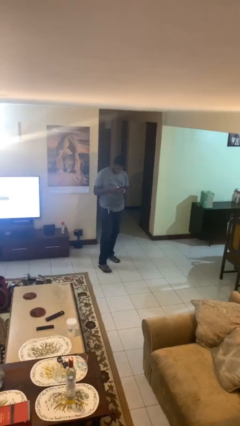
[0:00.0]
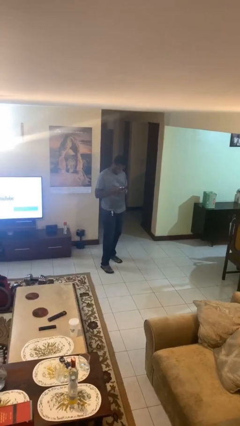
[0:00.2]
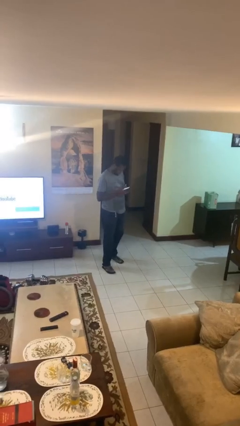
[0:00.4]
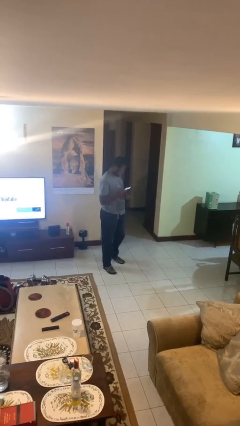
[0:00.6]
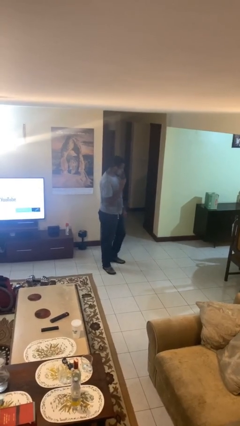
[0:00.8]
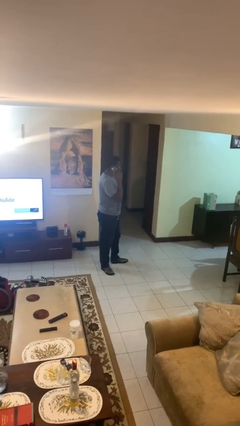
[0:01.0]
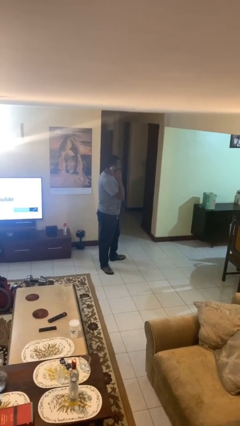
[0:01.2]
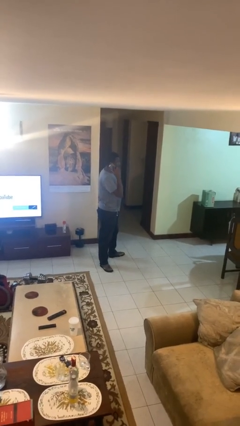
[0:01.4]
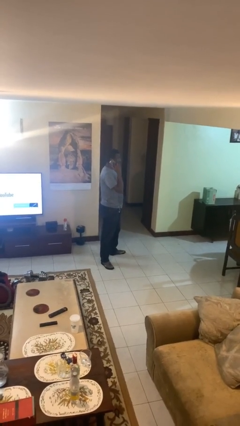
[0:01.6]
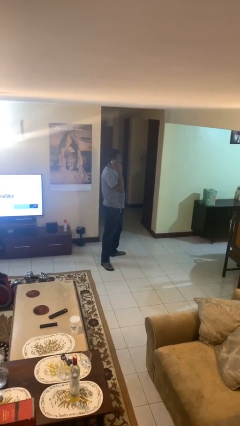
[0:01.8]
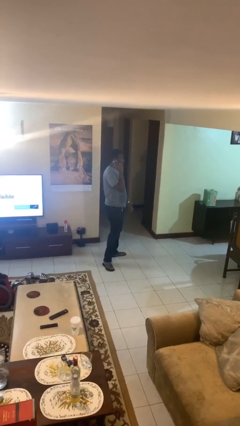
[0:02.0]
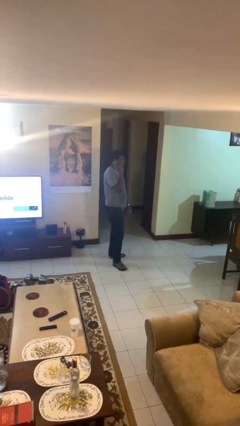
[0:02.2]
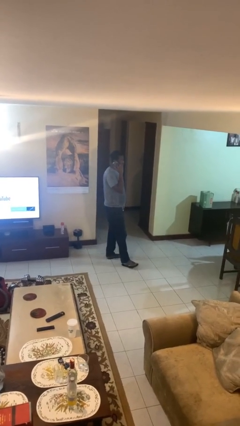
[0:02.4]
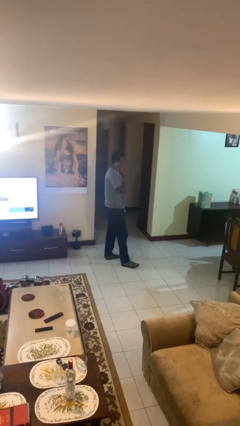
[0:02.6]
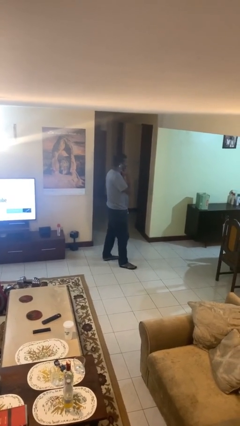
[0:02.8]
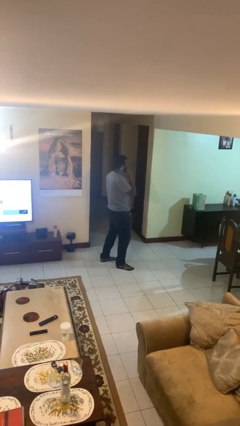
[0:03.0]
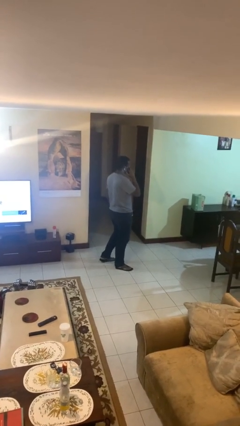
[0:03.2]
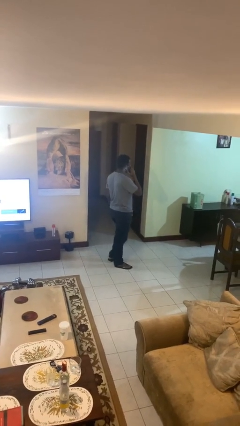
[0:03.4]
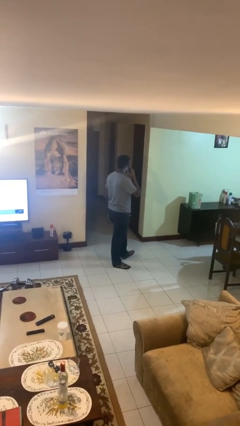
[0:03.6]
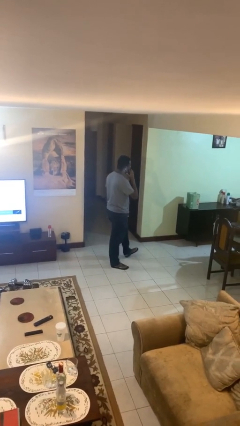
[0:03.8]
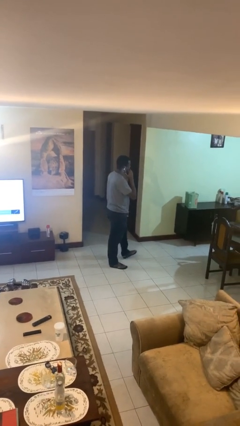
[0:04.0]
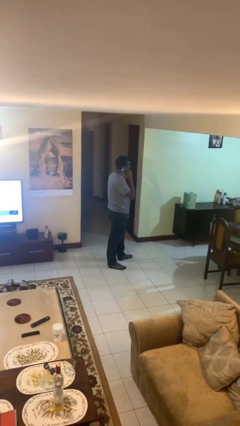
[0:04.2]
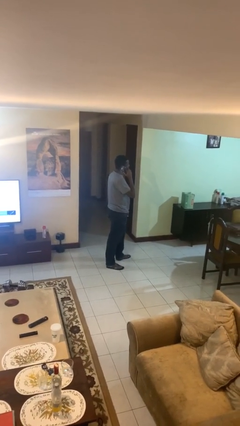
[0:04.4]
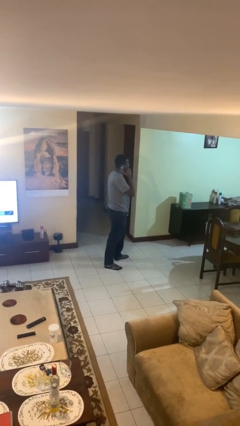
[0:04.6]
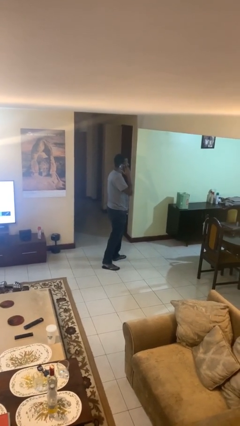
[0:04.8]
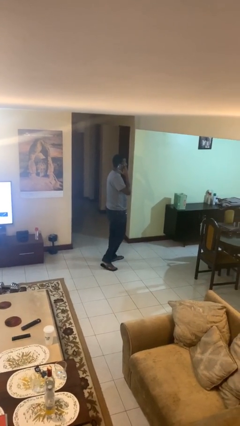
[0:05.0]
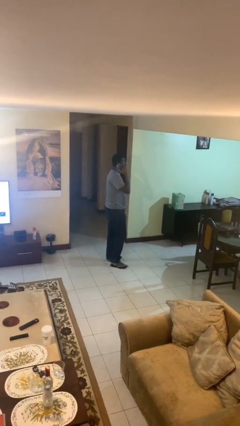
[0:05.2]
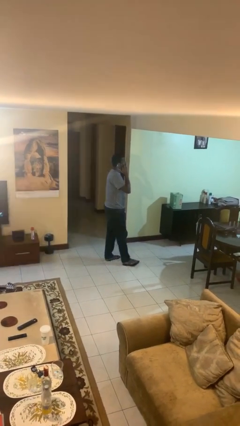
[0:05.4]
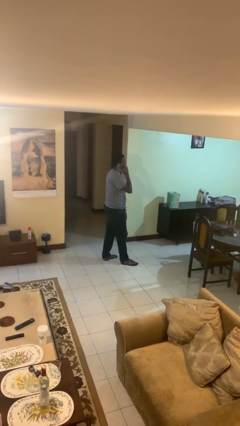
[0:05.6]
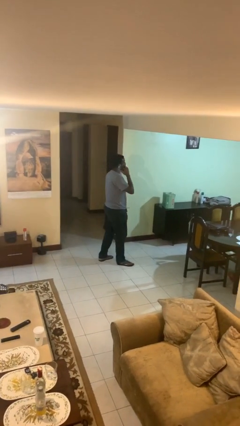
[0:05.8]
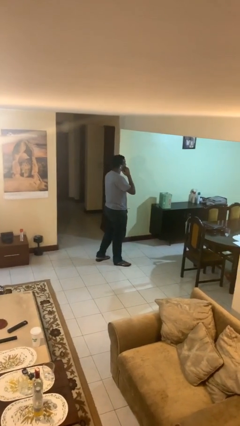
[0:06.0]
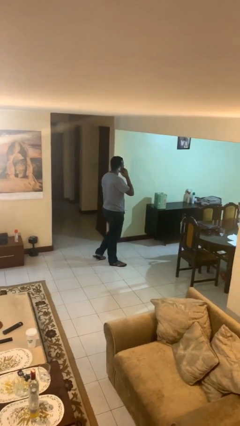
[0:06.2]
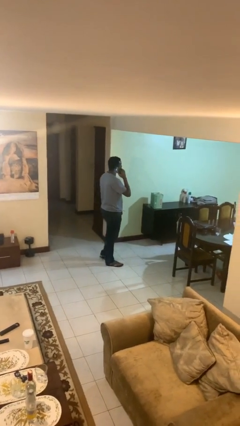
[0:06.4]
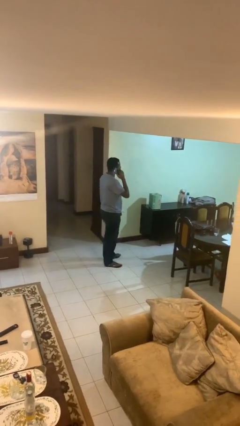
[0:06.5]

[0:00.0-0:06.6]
person talks on phone

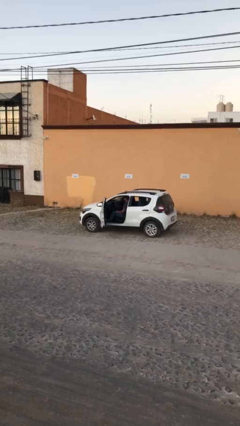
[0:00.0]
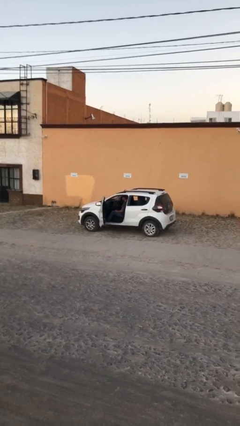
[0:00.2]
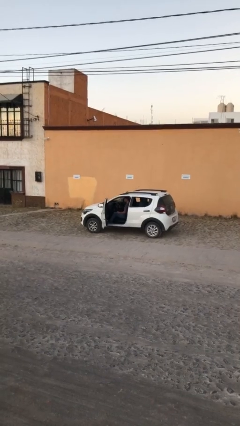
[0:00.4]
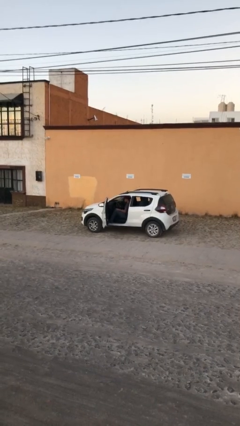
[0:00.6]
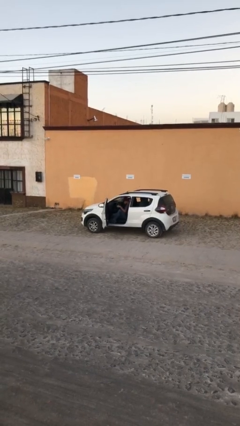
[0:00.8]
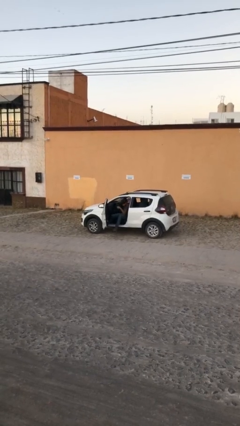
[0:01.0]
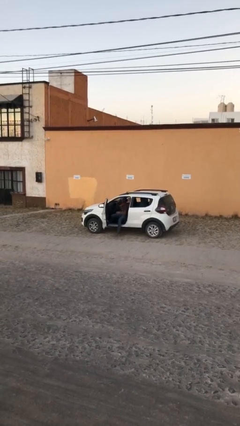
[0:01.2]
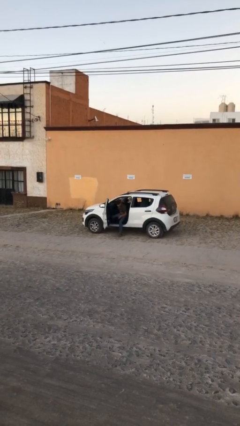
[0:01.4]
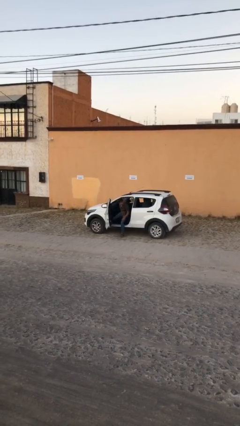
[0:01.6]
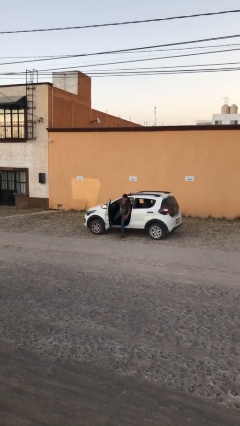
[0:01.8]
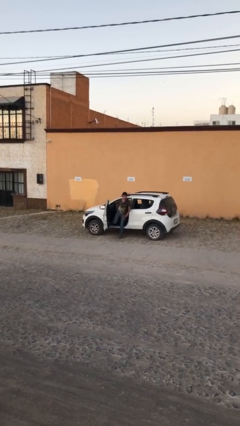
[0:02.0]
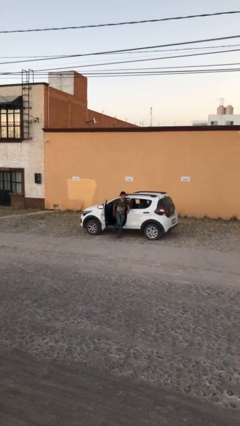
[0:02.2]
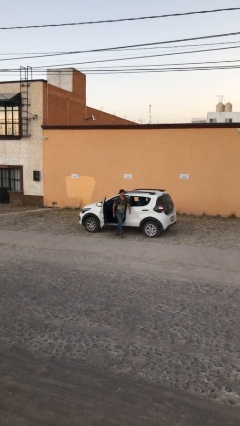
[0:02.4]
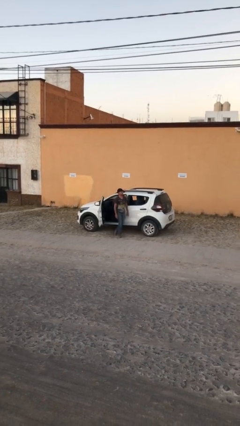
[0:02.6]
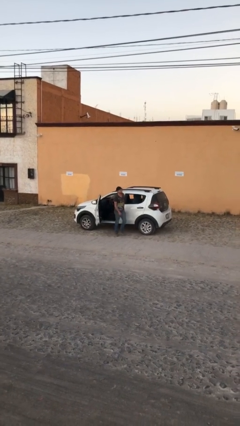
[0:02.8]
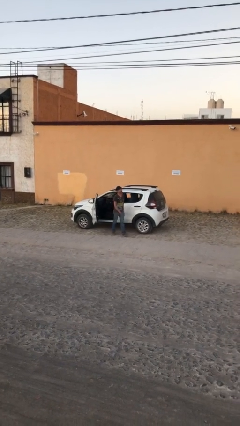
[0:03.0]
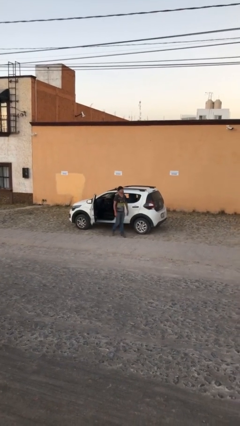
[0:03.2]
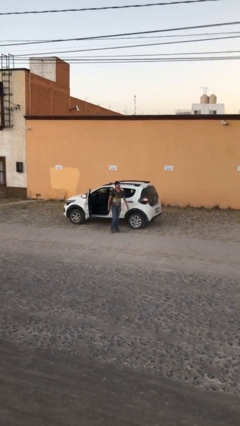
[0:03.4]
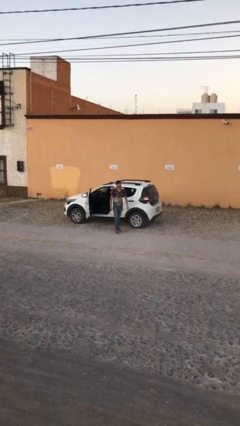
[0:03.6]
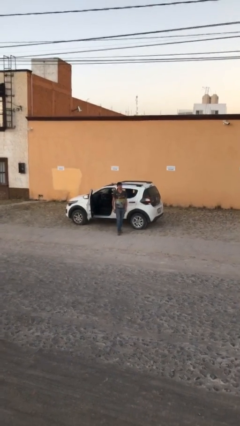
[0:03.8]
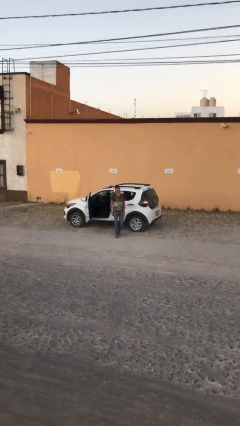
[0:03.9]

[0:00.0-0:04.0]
person exits car

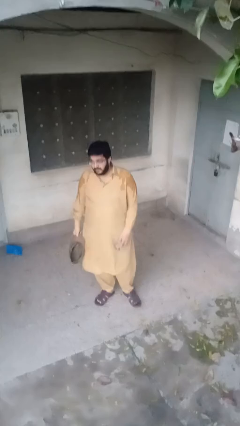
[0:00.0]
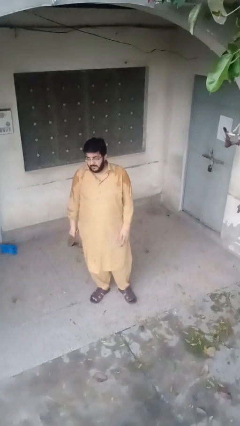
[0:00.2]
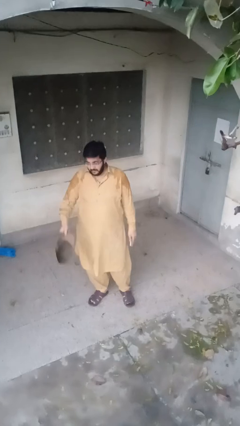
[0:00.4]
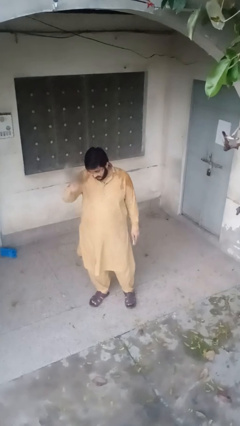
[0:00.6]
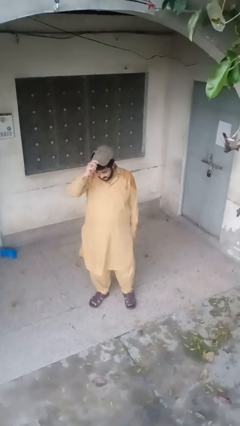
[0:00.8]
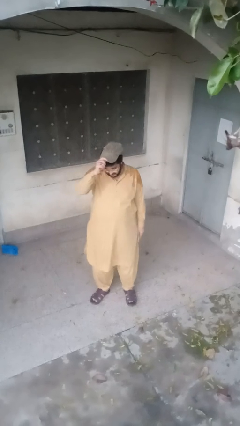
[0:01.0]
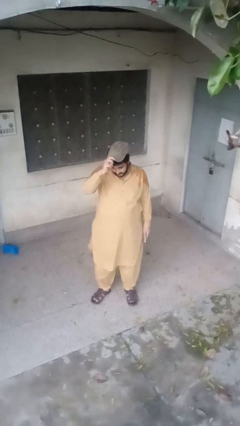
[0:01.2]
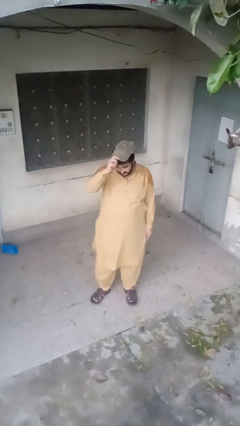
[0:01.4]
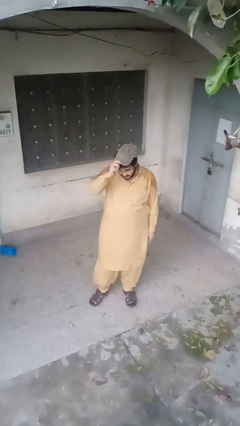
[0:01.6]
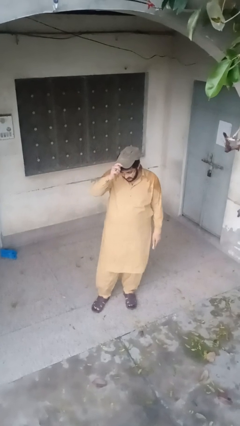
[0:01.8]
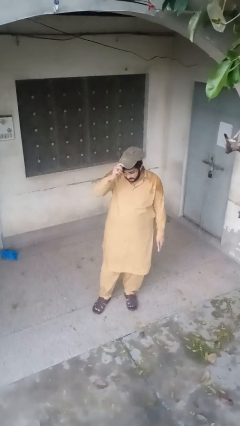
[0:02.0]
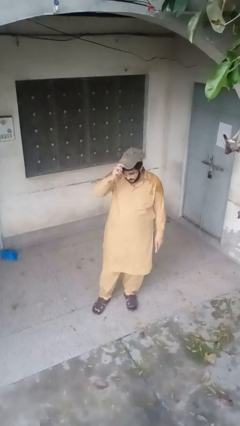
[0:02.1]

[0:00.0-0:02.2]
person puts on hat

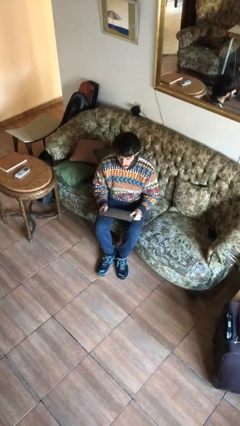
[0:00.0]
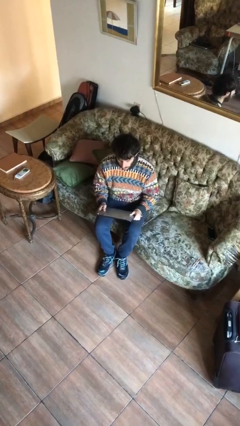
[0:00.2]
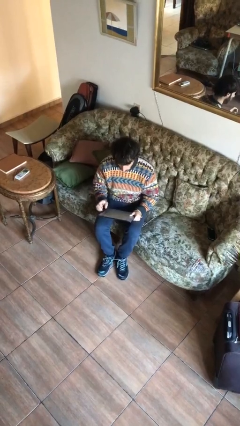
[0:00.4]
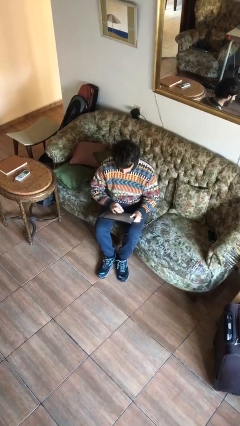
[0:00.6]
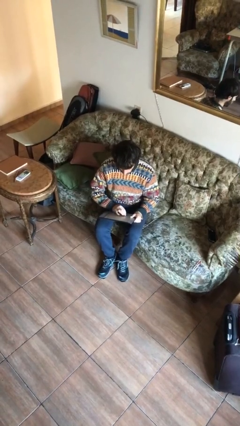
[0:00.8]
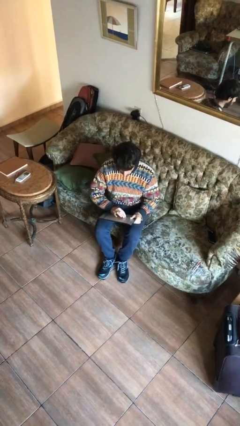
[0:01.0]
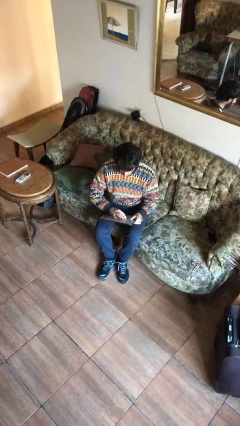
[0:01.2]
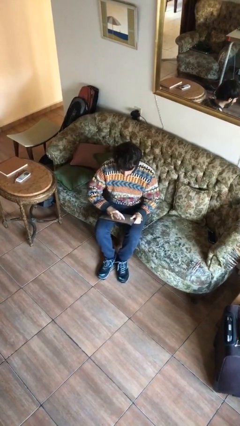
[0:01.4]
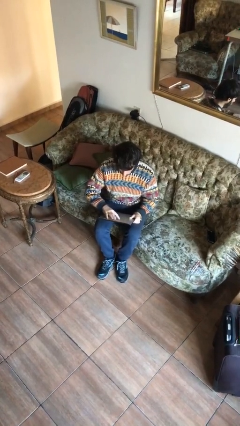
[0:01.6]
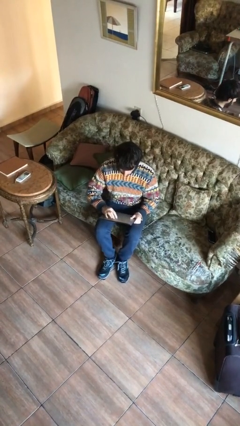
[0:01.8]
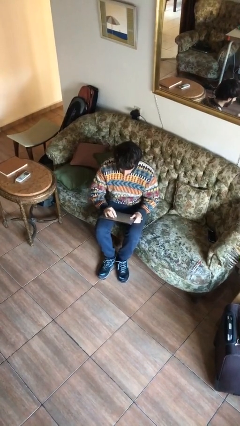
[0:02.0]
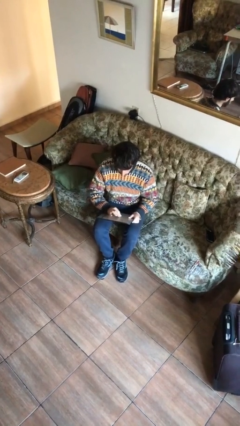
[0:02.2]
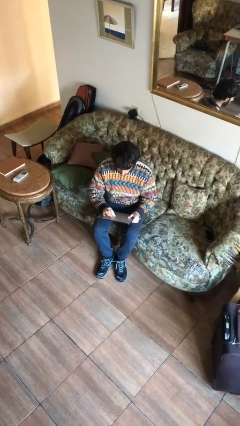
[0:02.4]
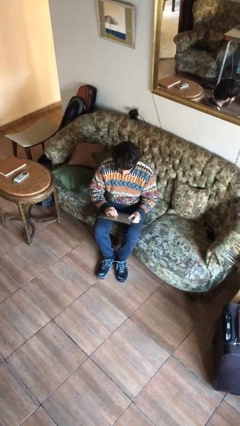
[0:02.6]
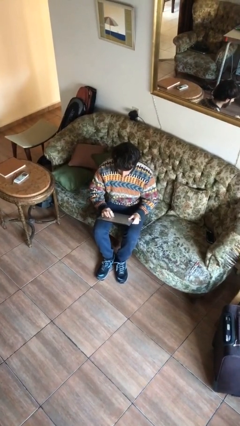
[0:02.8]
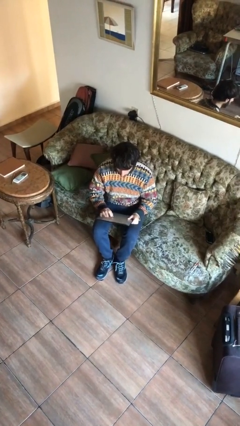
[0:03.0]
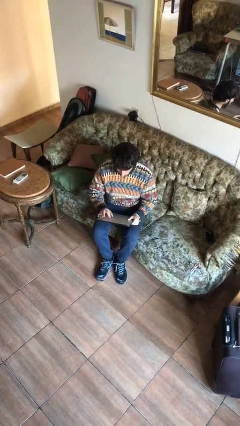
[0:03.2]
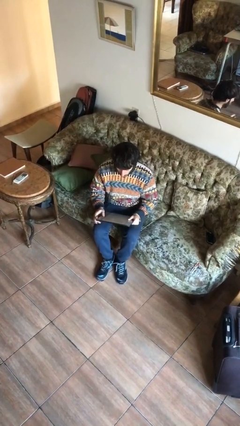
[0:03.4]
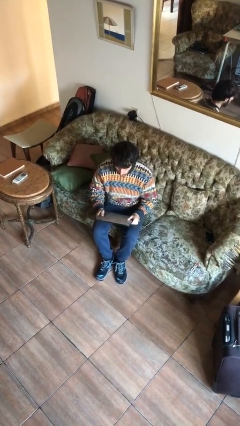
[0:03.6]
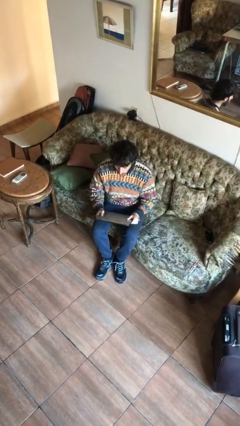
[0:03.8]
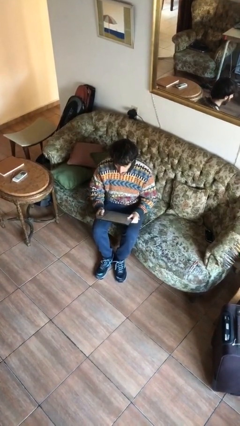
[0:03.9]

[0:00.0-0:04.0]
person interacts with tablet

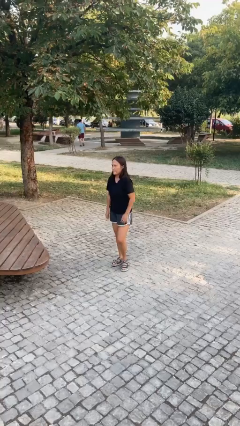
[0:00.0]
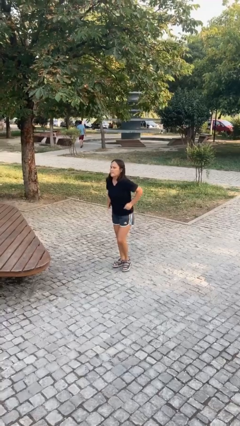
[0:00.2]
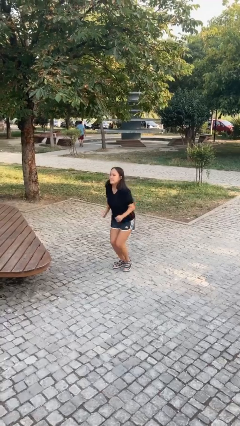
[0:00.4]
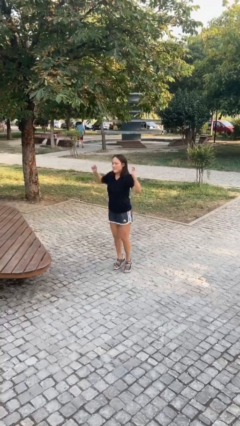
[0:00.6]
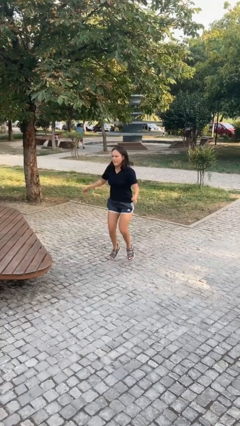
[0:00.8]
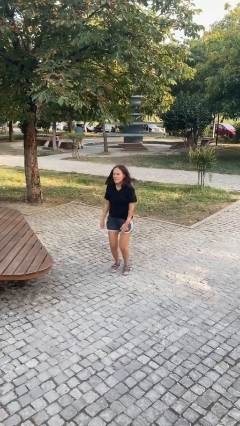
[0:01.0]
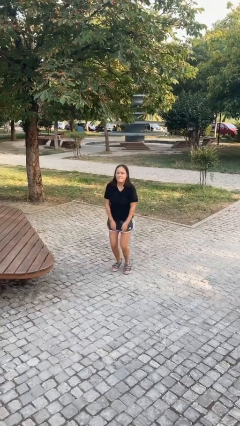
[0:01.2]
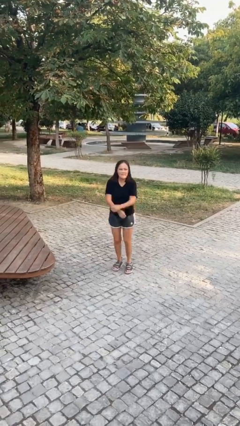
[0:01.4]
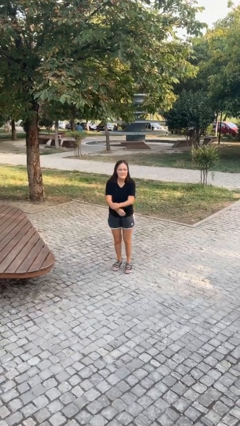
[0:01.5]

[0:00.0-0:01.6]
person jumps
